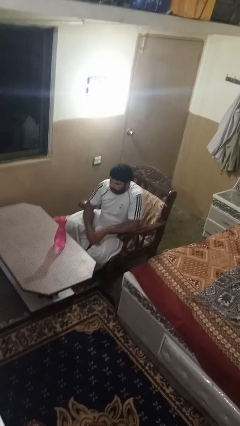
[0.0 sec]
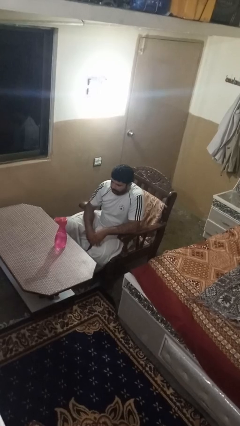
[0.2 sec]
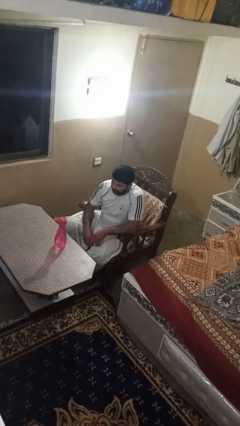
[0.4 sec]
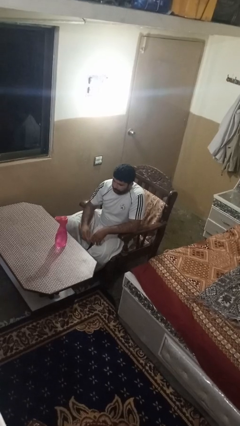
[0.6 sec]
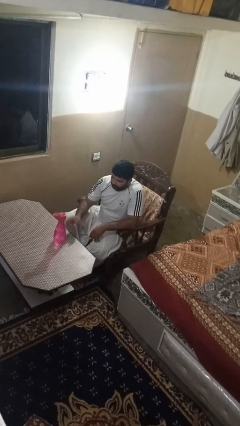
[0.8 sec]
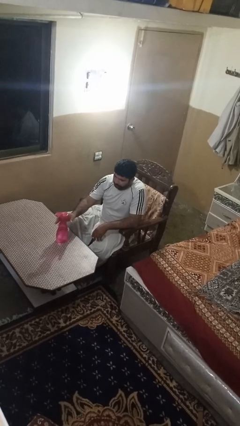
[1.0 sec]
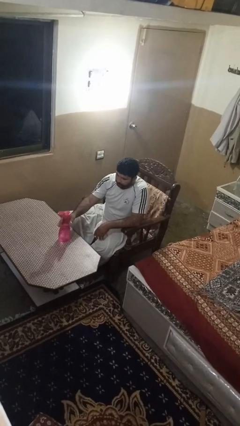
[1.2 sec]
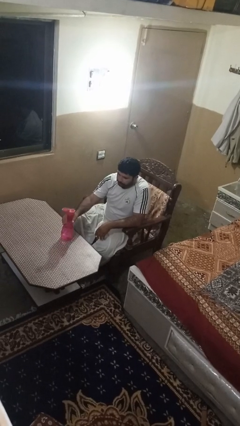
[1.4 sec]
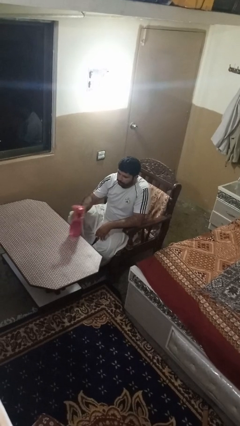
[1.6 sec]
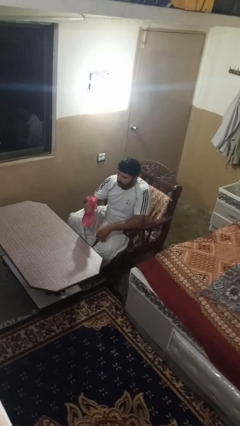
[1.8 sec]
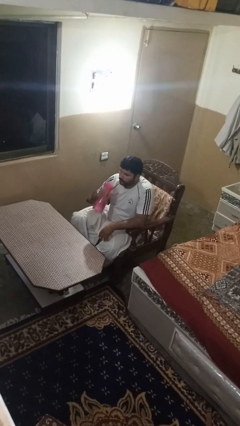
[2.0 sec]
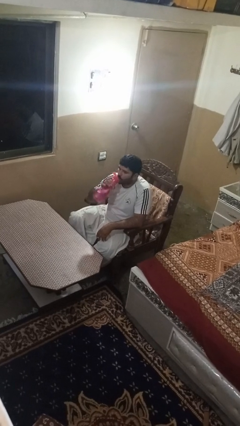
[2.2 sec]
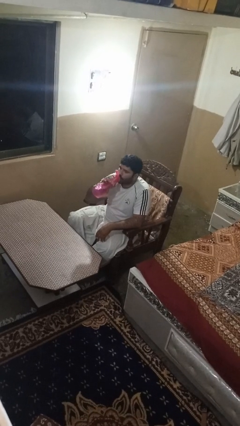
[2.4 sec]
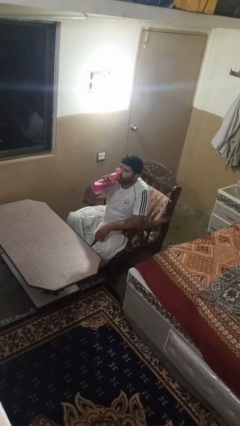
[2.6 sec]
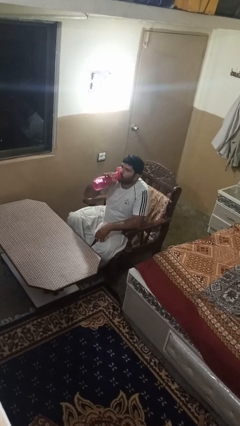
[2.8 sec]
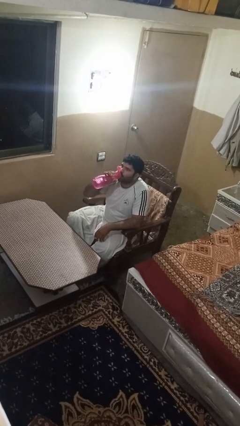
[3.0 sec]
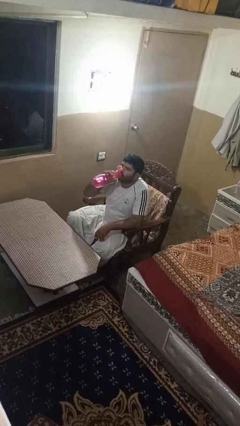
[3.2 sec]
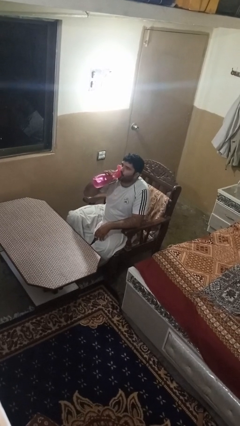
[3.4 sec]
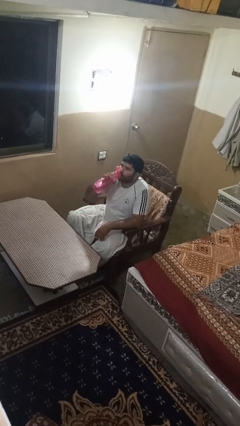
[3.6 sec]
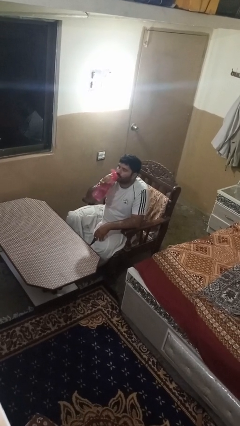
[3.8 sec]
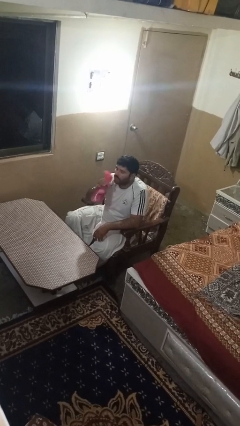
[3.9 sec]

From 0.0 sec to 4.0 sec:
person drinks from bottle

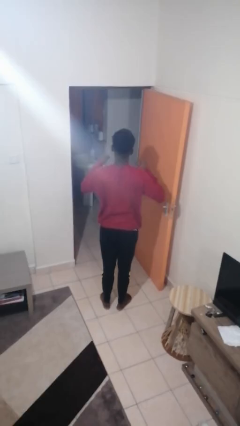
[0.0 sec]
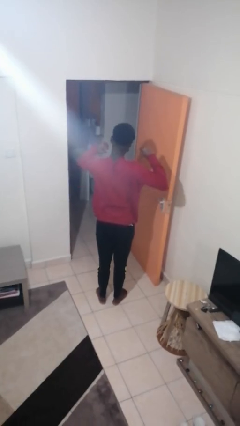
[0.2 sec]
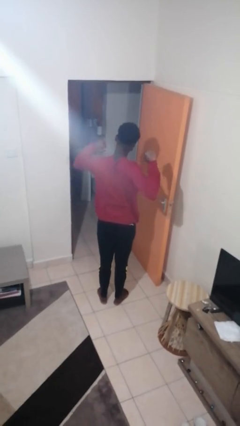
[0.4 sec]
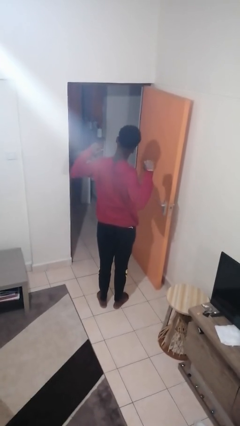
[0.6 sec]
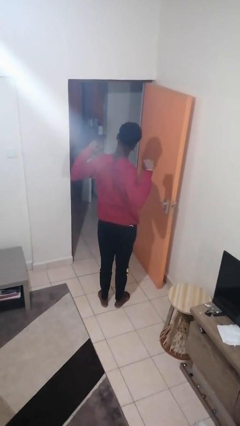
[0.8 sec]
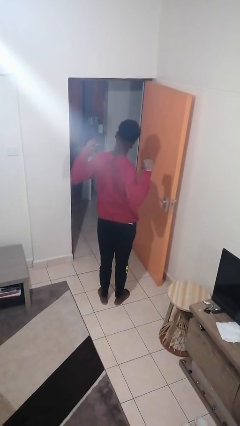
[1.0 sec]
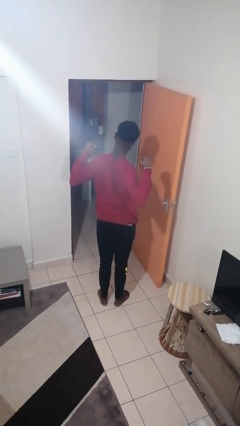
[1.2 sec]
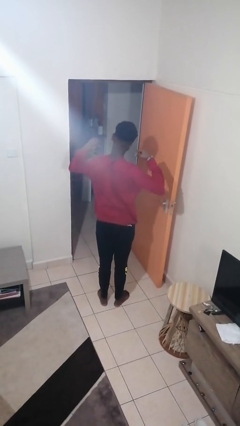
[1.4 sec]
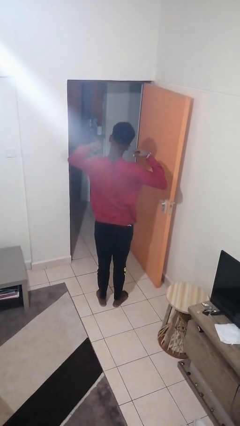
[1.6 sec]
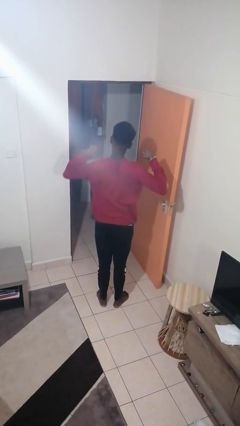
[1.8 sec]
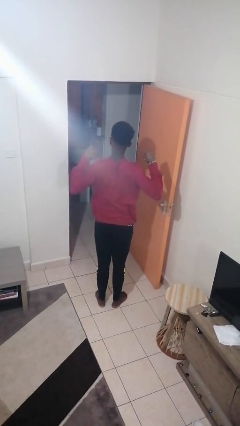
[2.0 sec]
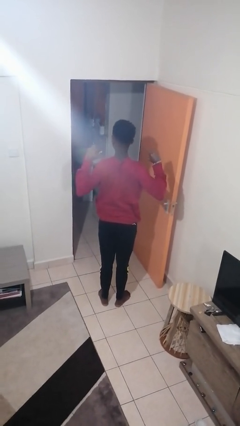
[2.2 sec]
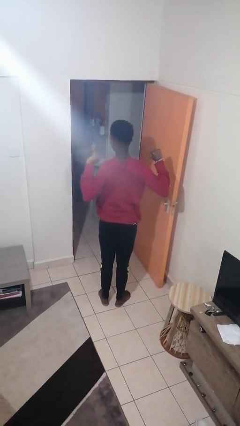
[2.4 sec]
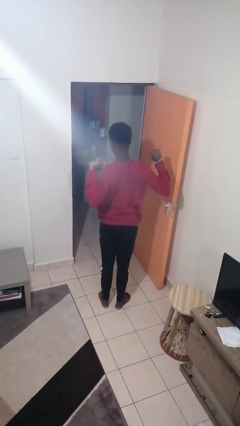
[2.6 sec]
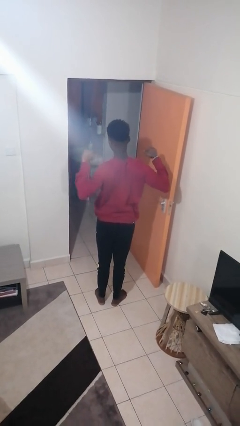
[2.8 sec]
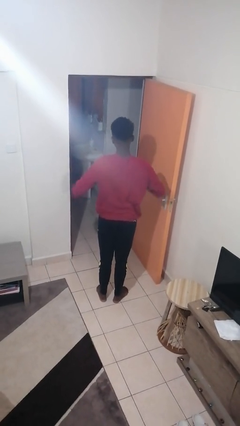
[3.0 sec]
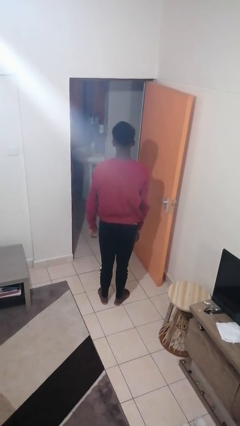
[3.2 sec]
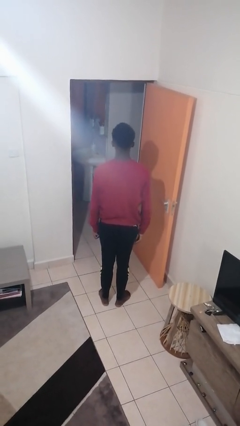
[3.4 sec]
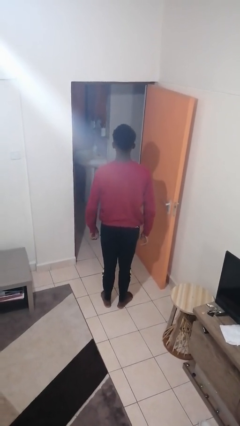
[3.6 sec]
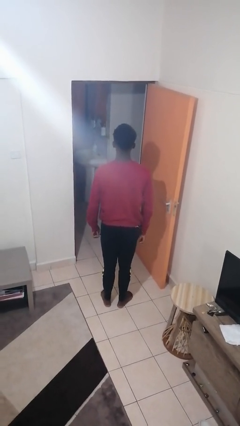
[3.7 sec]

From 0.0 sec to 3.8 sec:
person stretches arms to side

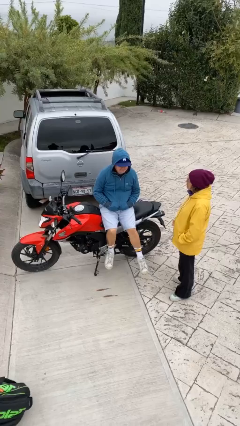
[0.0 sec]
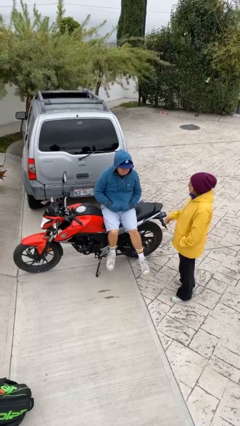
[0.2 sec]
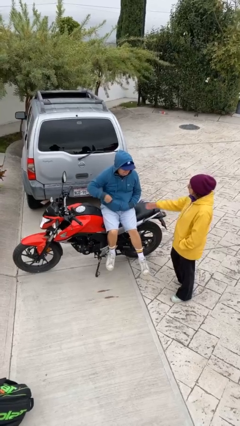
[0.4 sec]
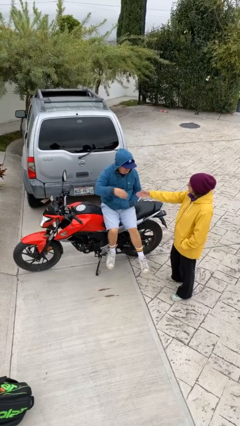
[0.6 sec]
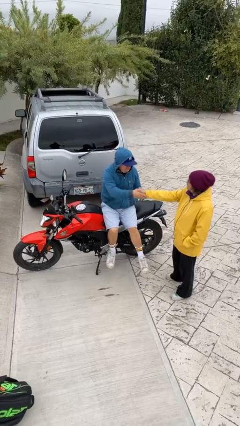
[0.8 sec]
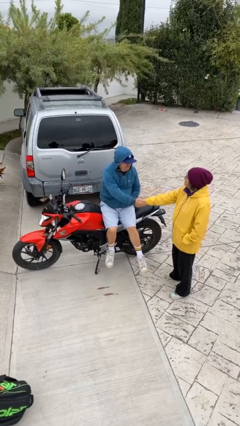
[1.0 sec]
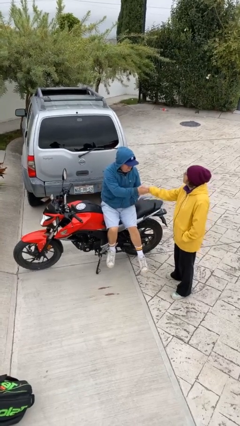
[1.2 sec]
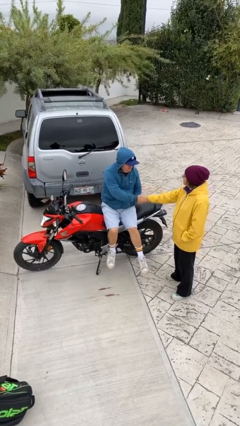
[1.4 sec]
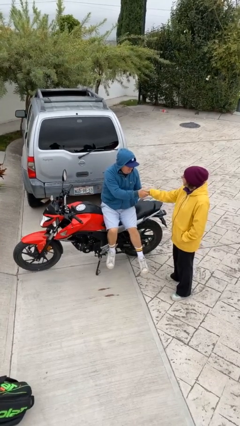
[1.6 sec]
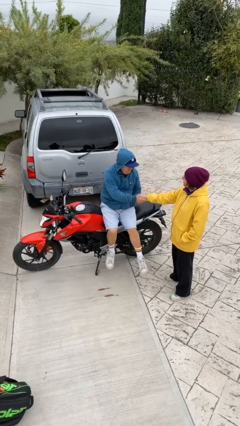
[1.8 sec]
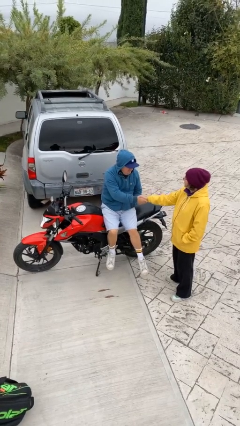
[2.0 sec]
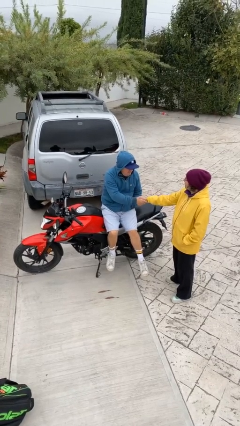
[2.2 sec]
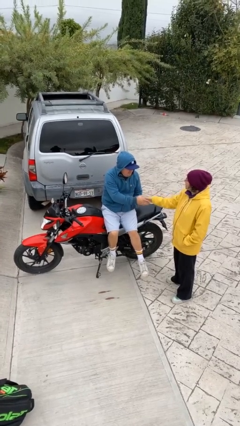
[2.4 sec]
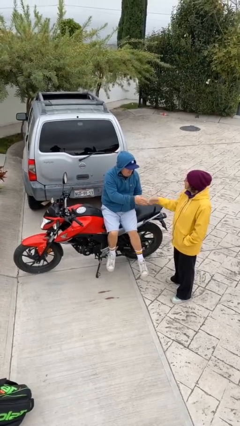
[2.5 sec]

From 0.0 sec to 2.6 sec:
person shakes hand

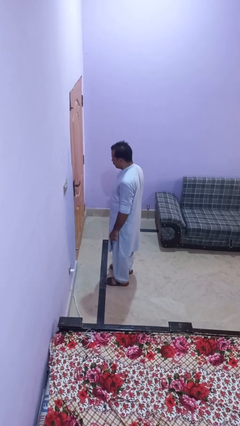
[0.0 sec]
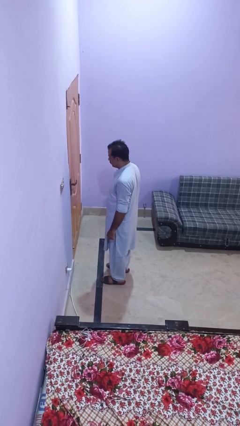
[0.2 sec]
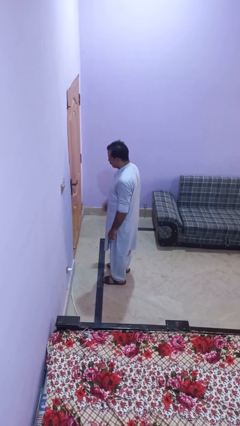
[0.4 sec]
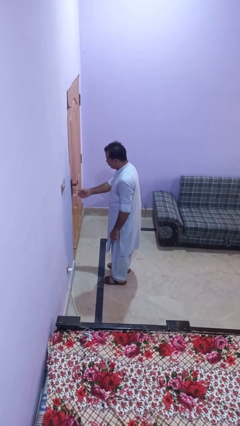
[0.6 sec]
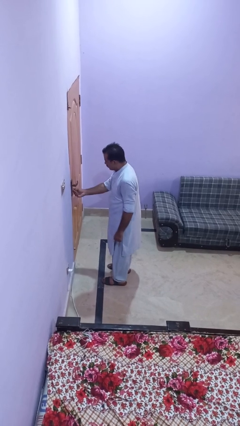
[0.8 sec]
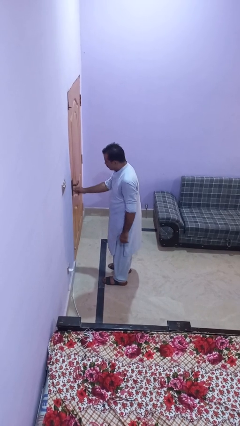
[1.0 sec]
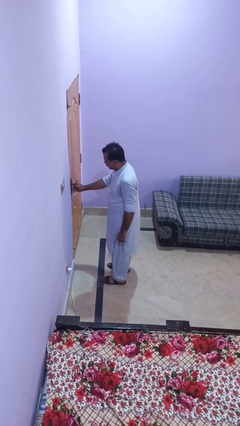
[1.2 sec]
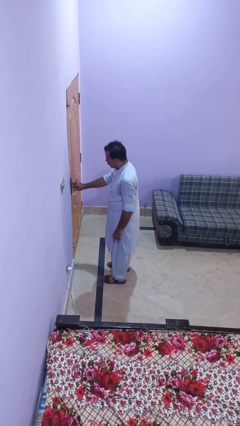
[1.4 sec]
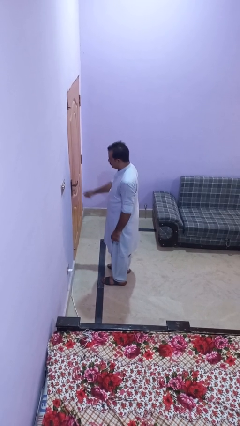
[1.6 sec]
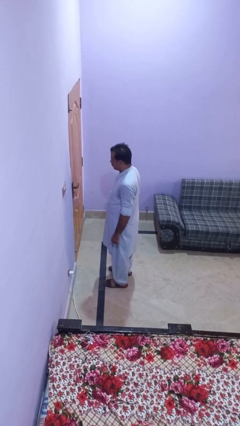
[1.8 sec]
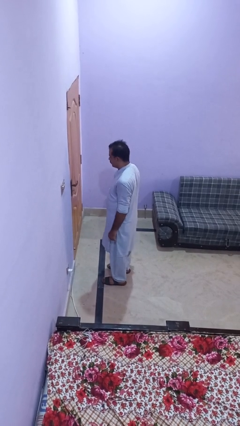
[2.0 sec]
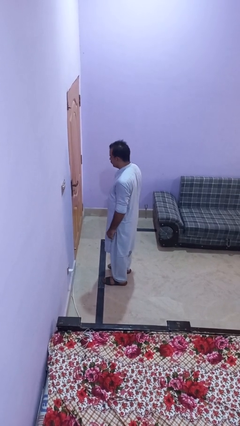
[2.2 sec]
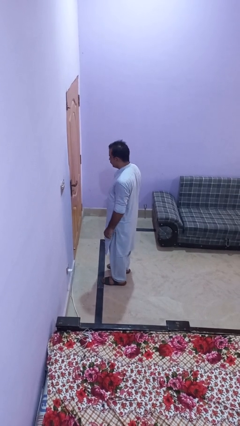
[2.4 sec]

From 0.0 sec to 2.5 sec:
person locks door with keys

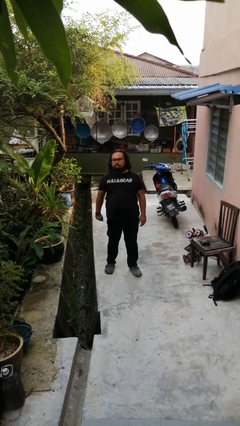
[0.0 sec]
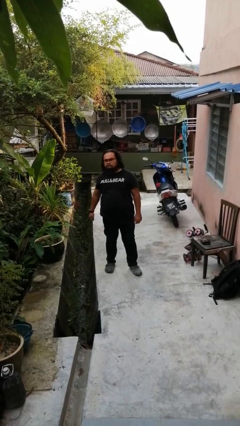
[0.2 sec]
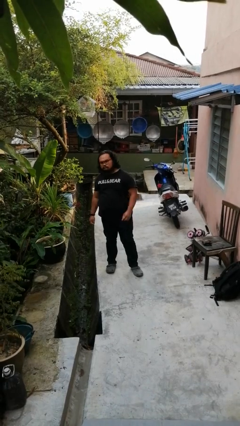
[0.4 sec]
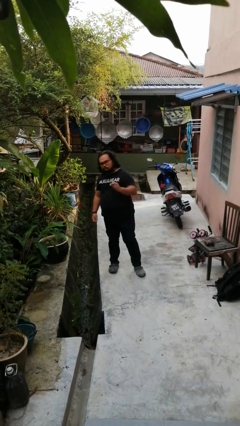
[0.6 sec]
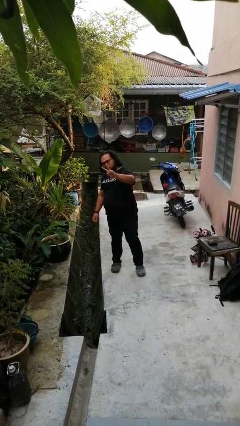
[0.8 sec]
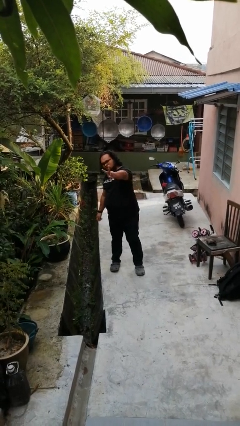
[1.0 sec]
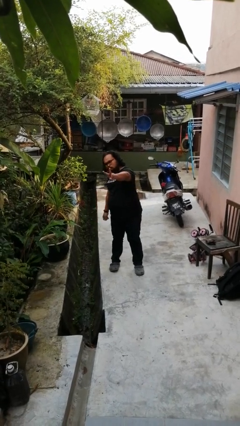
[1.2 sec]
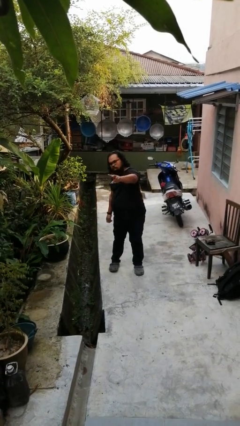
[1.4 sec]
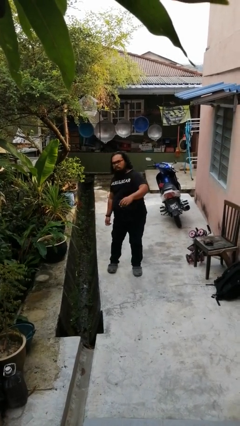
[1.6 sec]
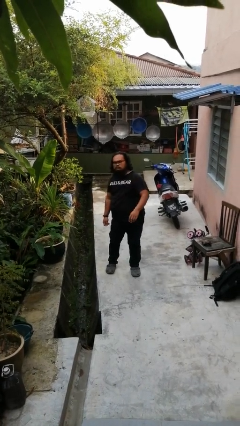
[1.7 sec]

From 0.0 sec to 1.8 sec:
person gestures peace

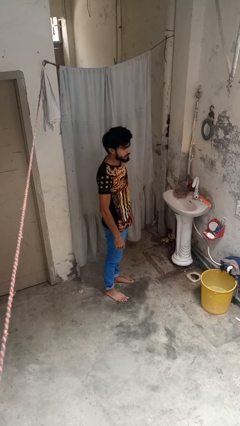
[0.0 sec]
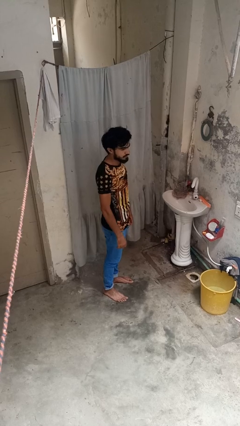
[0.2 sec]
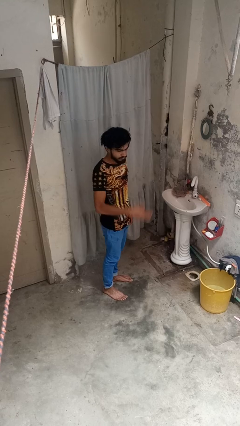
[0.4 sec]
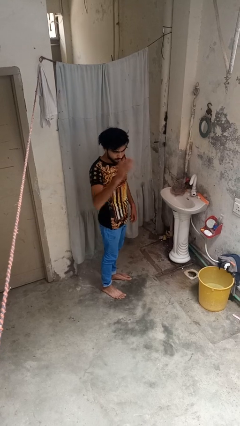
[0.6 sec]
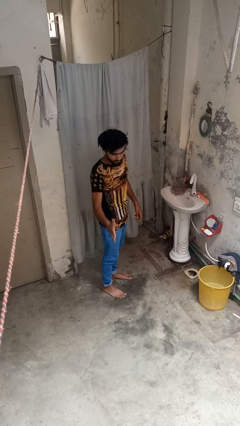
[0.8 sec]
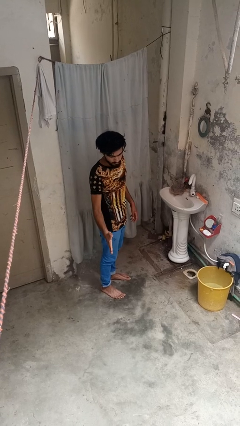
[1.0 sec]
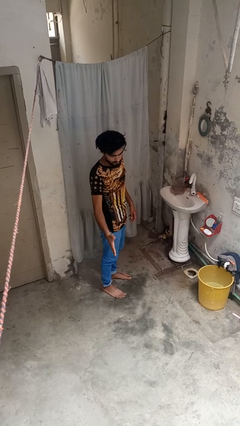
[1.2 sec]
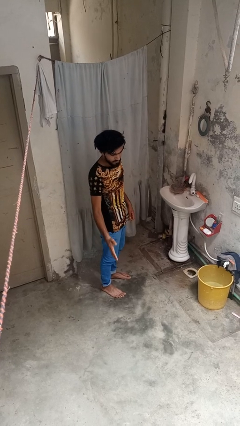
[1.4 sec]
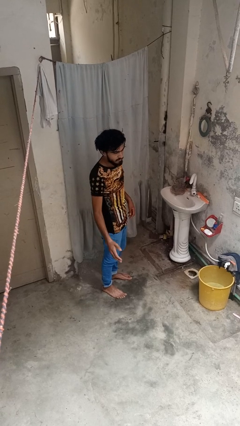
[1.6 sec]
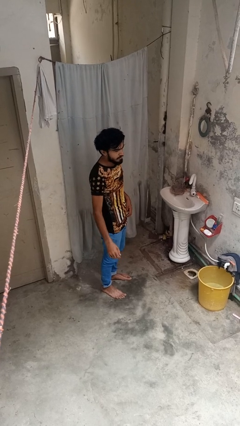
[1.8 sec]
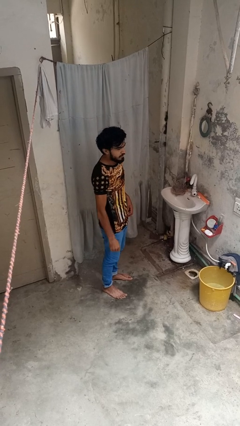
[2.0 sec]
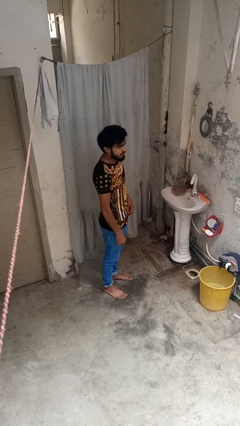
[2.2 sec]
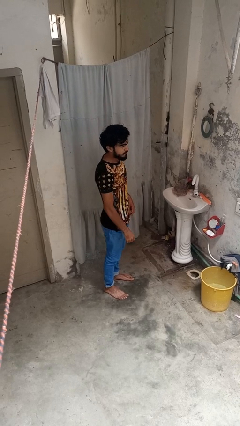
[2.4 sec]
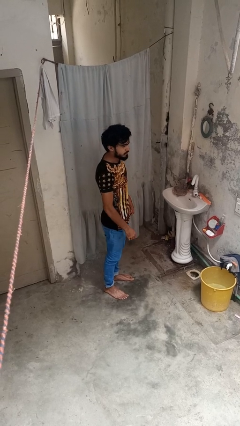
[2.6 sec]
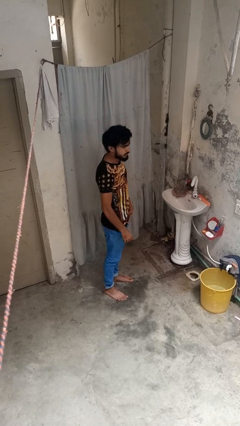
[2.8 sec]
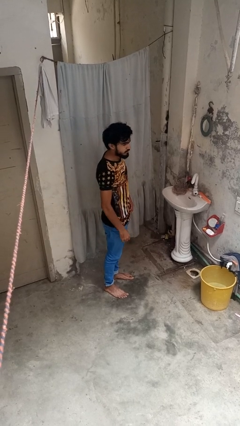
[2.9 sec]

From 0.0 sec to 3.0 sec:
person karate chop
